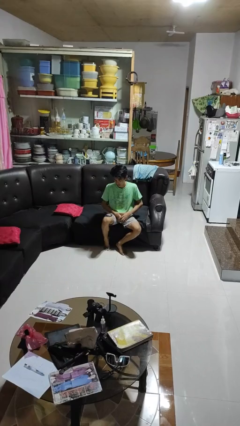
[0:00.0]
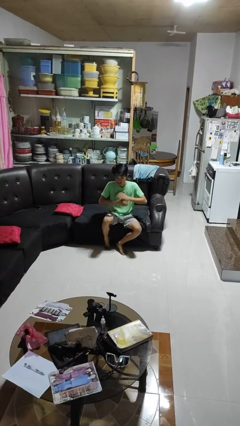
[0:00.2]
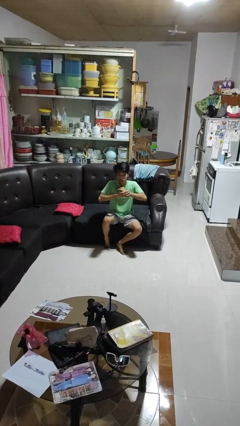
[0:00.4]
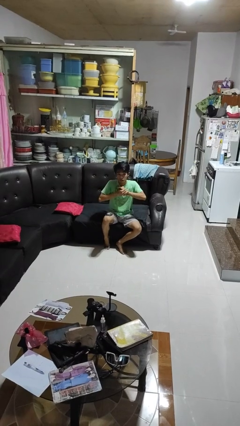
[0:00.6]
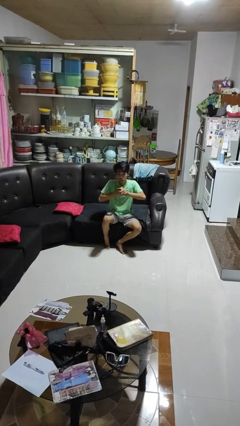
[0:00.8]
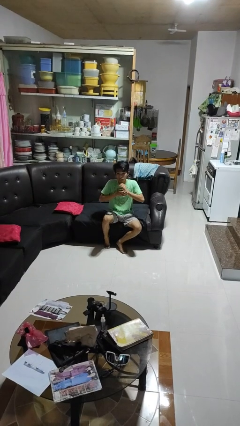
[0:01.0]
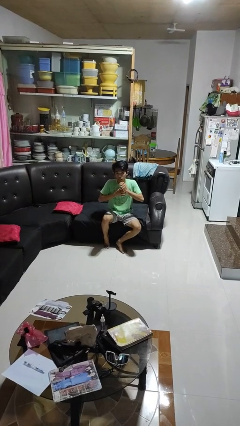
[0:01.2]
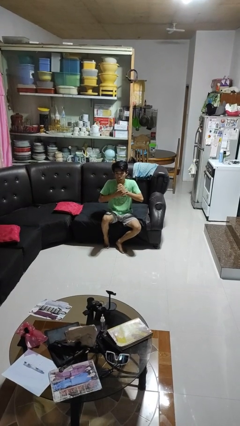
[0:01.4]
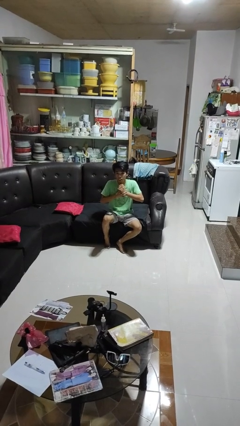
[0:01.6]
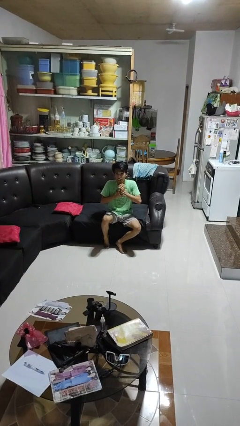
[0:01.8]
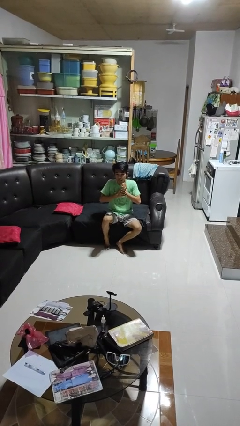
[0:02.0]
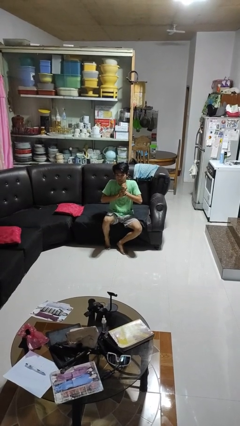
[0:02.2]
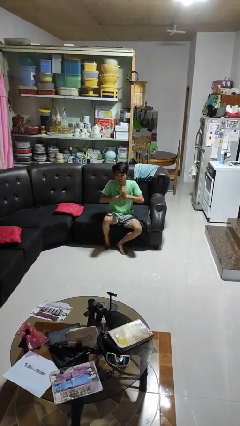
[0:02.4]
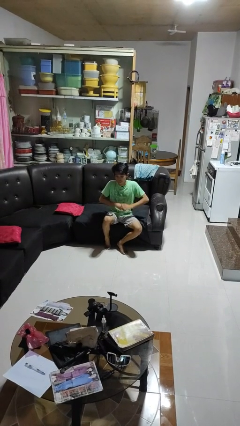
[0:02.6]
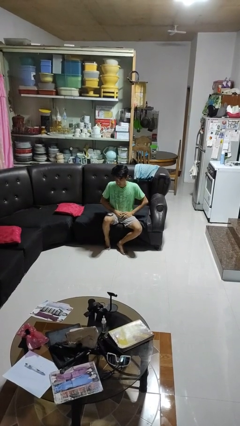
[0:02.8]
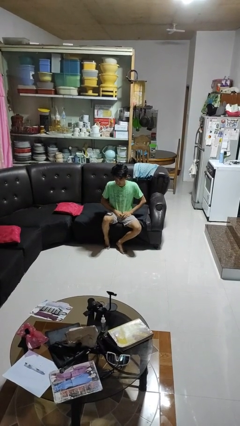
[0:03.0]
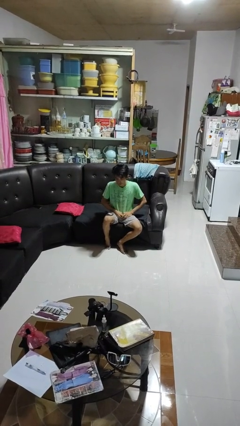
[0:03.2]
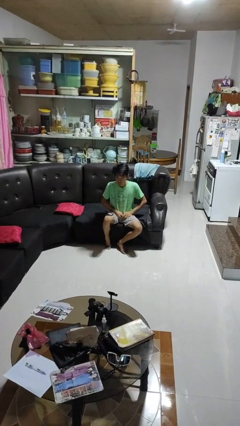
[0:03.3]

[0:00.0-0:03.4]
person cracks knuckles

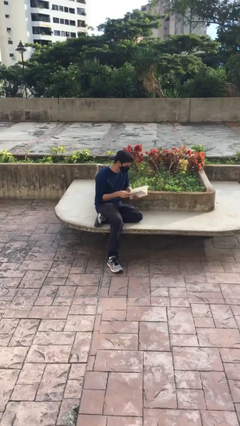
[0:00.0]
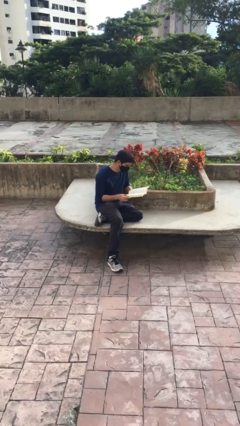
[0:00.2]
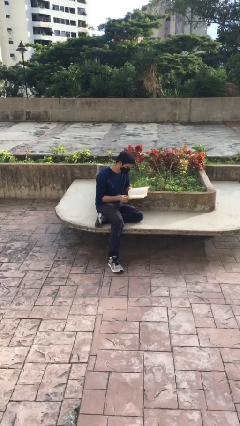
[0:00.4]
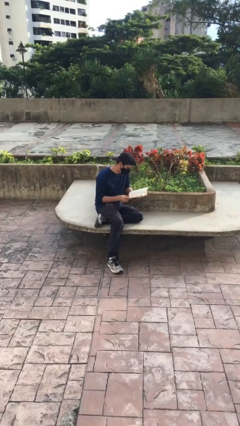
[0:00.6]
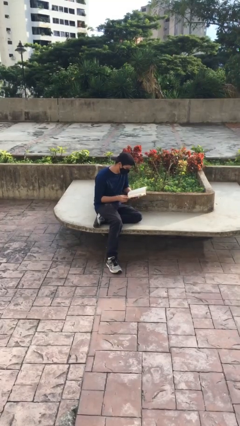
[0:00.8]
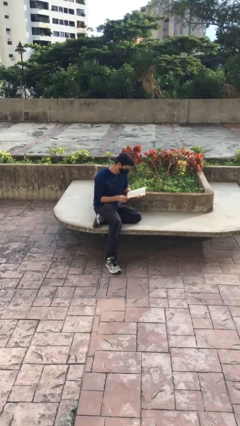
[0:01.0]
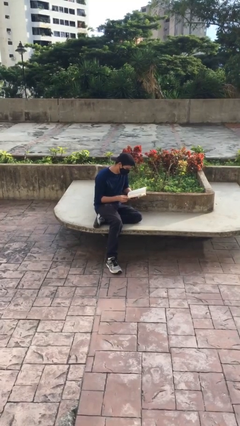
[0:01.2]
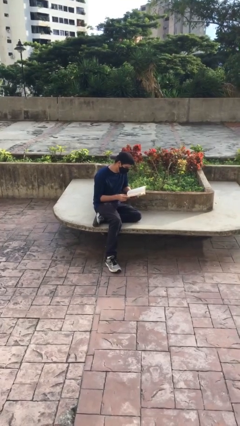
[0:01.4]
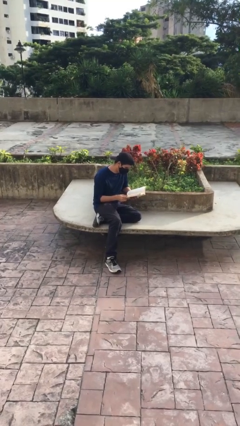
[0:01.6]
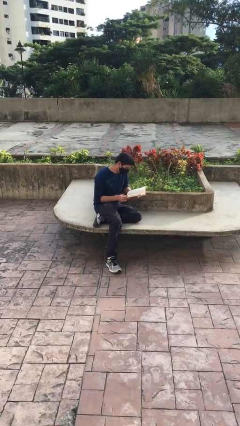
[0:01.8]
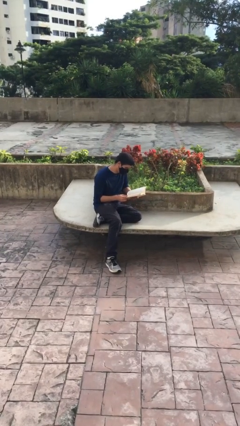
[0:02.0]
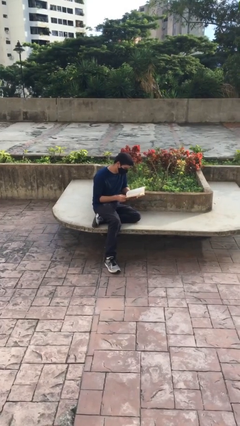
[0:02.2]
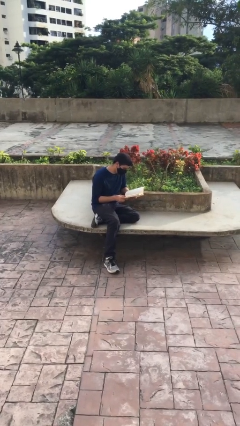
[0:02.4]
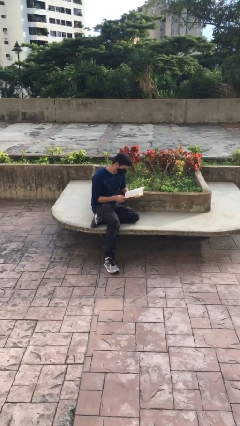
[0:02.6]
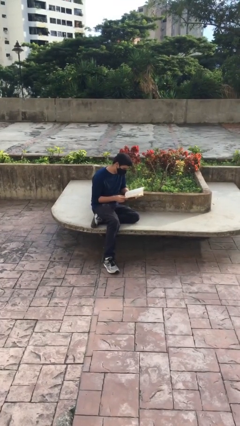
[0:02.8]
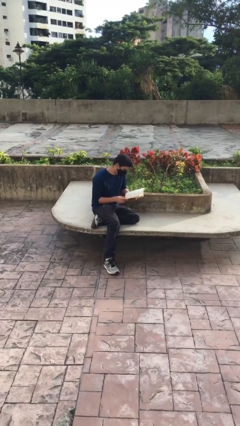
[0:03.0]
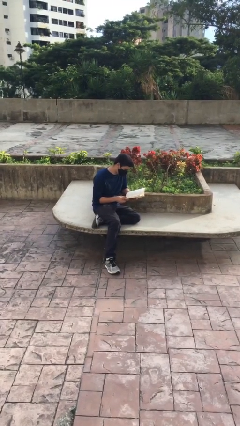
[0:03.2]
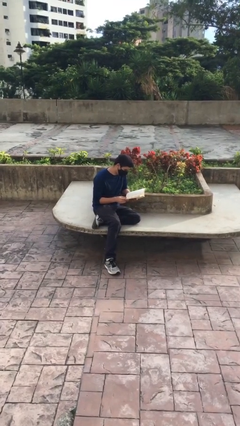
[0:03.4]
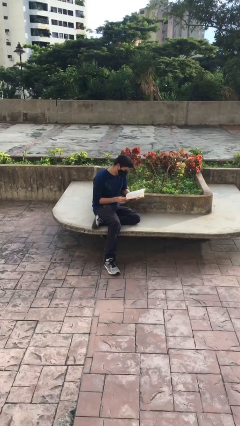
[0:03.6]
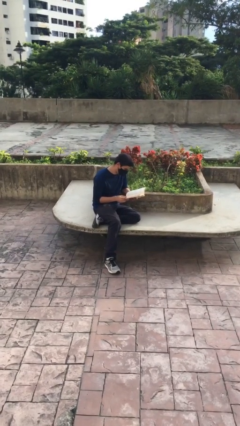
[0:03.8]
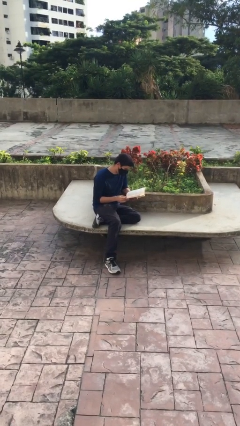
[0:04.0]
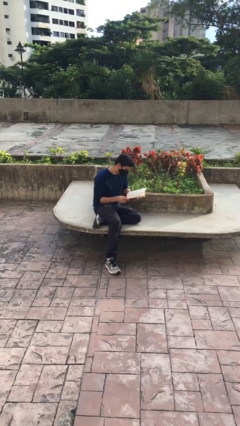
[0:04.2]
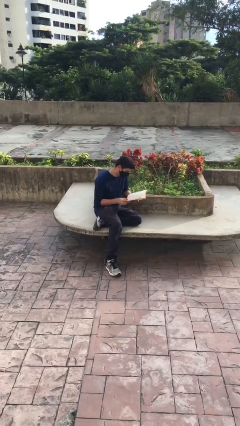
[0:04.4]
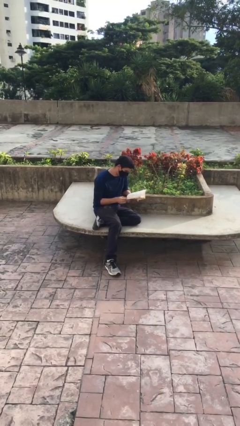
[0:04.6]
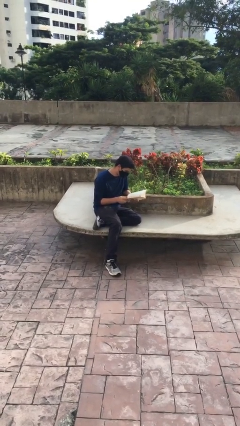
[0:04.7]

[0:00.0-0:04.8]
person reads document

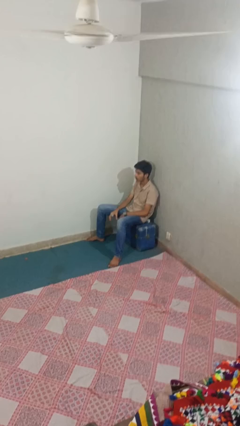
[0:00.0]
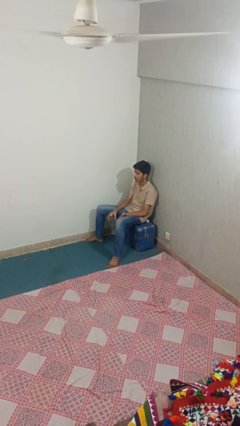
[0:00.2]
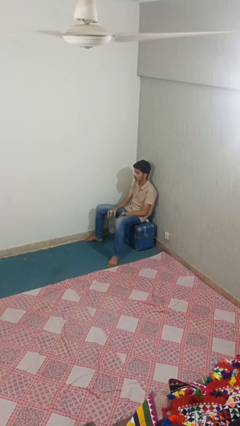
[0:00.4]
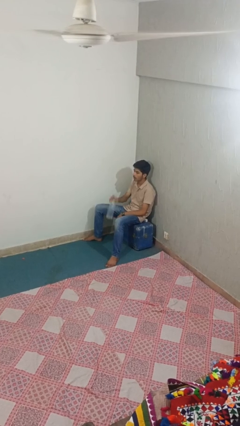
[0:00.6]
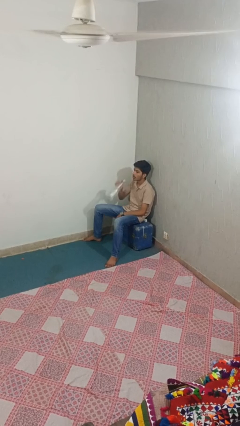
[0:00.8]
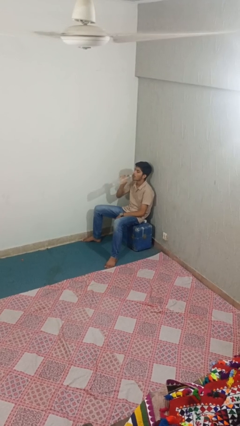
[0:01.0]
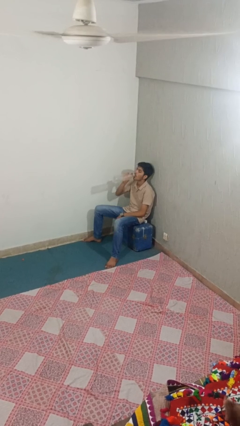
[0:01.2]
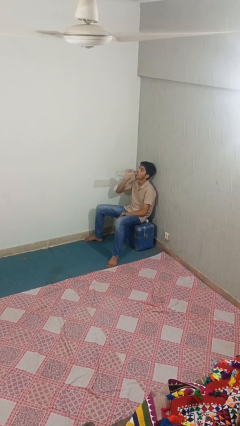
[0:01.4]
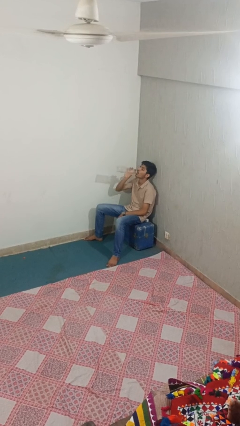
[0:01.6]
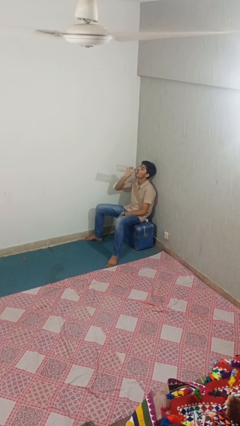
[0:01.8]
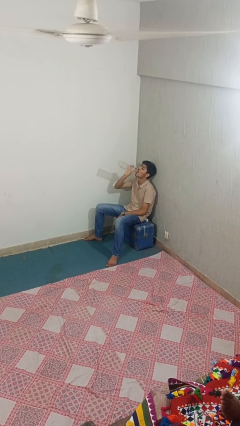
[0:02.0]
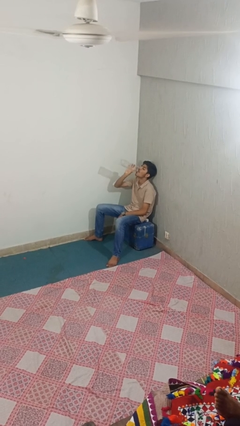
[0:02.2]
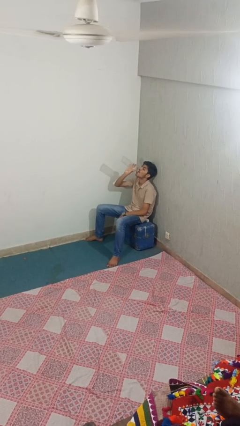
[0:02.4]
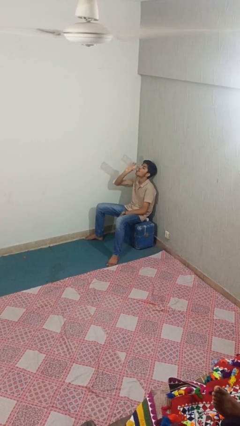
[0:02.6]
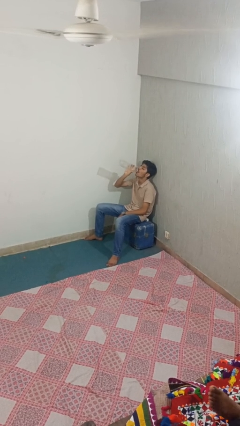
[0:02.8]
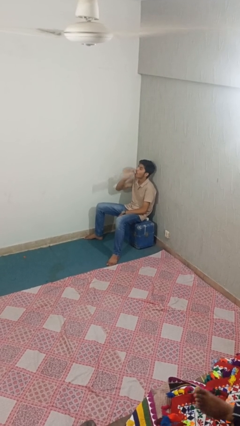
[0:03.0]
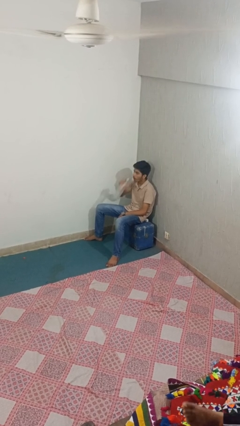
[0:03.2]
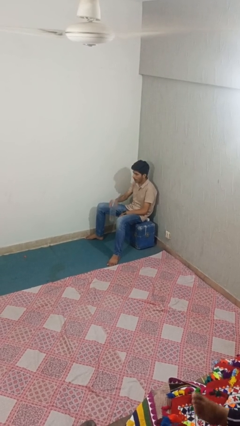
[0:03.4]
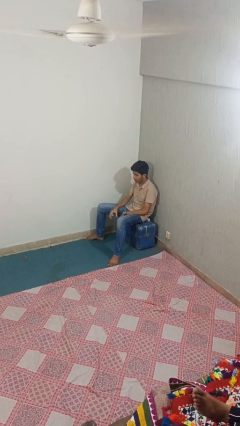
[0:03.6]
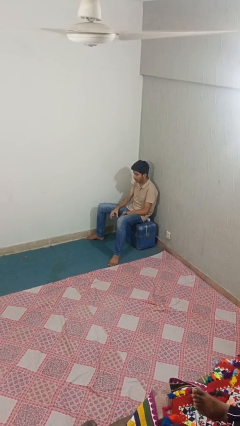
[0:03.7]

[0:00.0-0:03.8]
person drinks from bottle

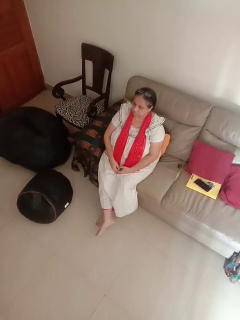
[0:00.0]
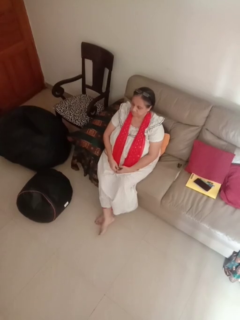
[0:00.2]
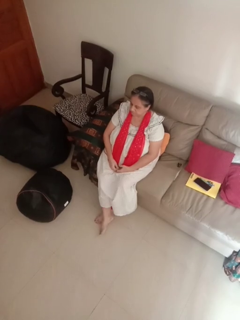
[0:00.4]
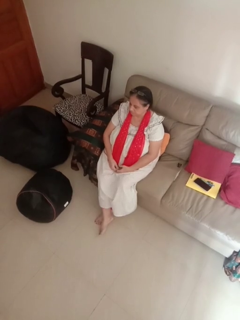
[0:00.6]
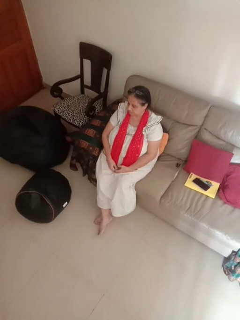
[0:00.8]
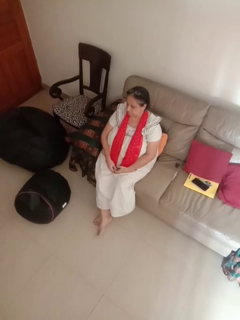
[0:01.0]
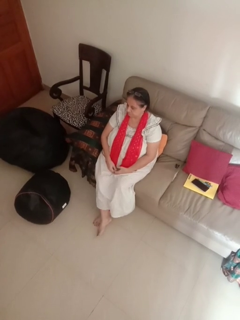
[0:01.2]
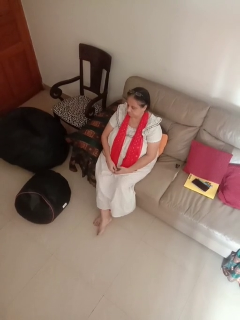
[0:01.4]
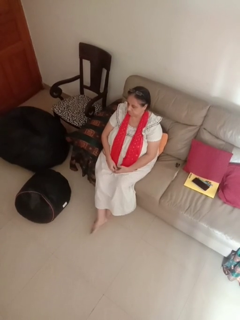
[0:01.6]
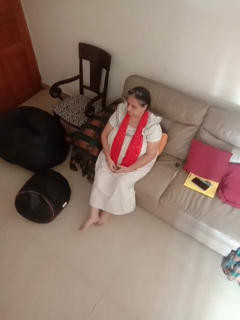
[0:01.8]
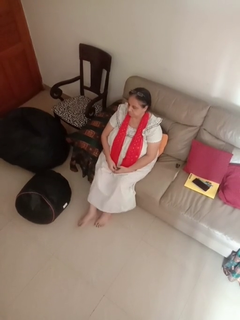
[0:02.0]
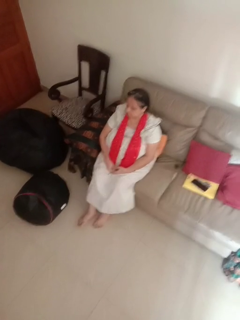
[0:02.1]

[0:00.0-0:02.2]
person crosses legs

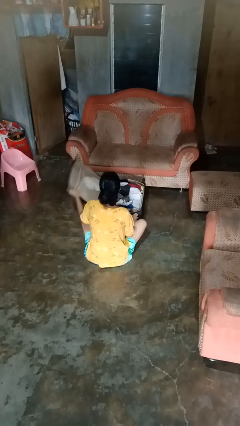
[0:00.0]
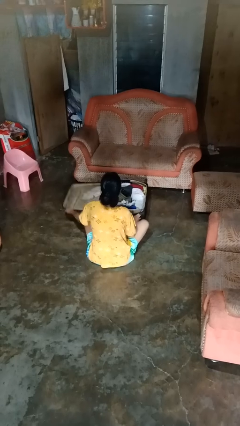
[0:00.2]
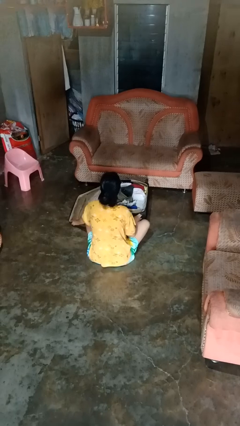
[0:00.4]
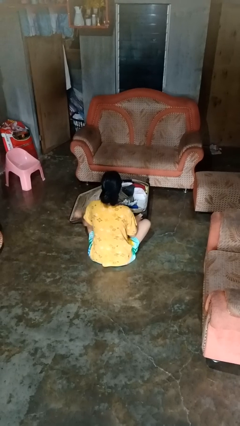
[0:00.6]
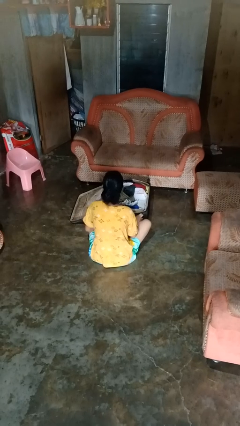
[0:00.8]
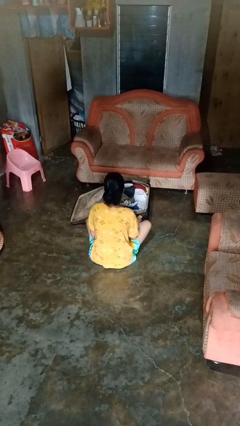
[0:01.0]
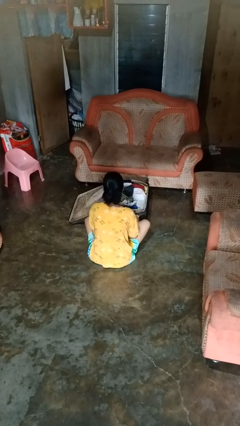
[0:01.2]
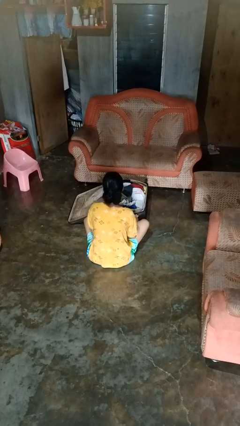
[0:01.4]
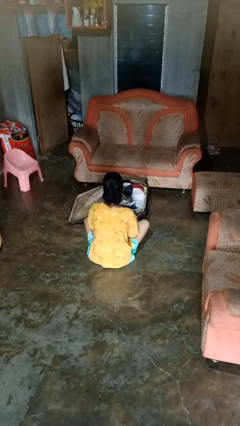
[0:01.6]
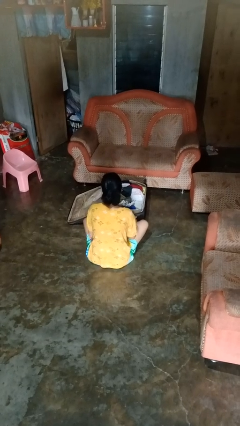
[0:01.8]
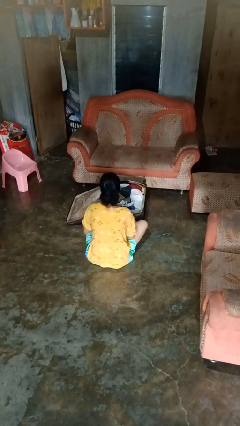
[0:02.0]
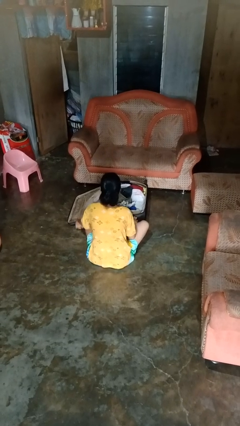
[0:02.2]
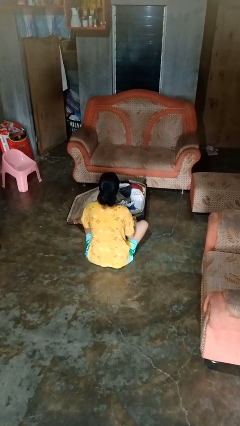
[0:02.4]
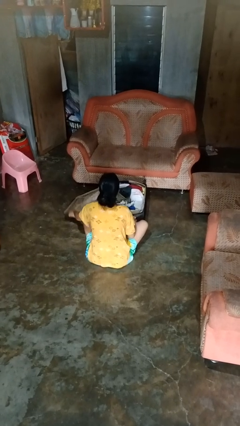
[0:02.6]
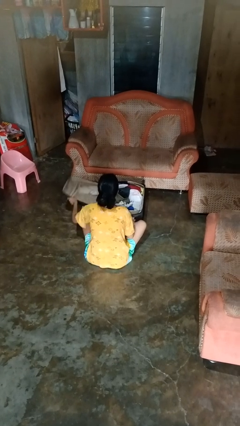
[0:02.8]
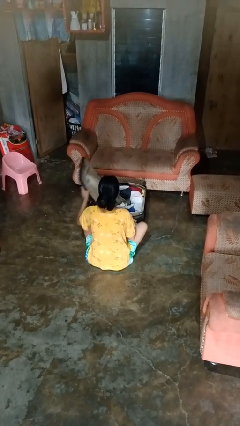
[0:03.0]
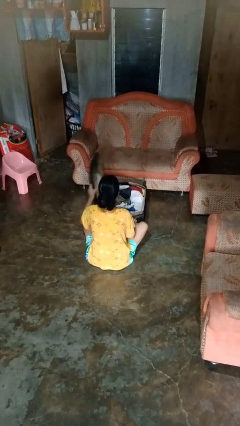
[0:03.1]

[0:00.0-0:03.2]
person opens suitcase

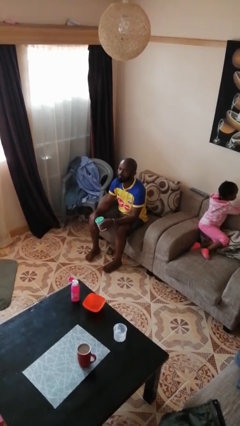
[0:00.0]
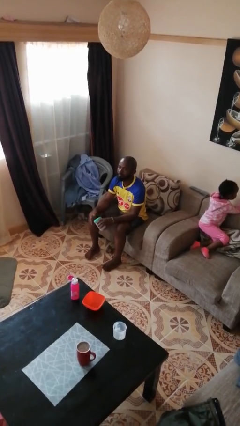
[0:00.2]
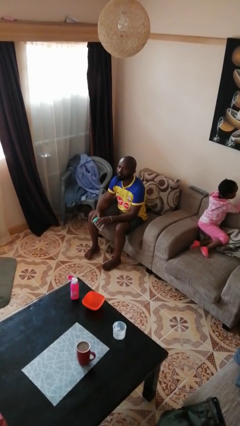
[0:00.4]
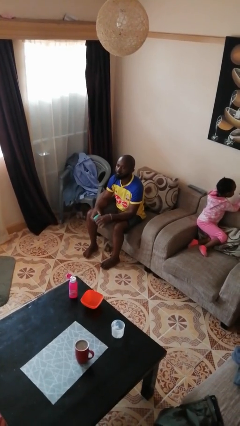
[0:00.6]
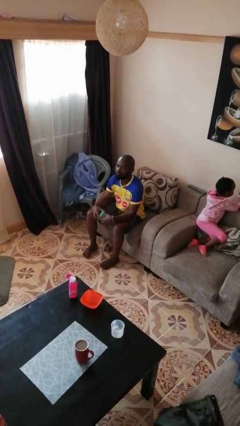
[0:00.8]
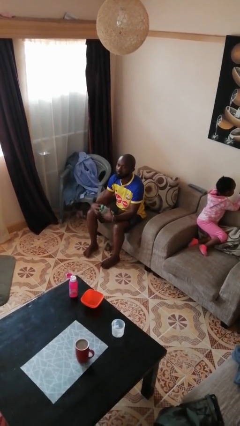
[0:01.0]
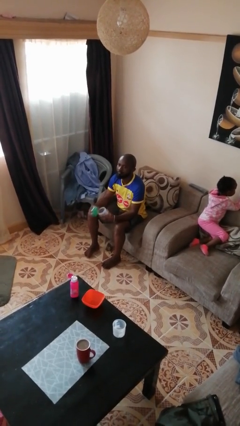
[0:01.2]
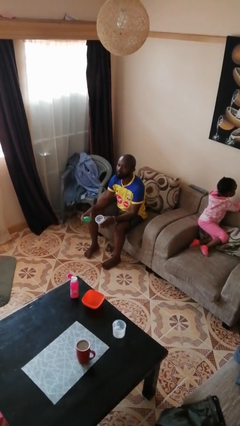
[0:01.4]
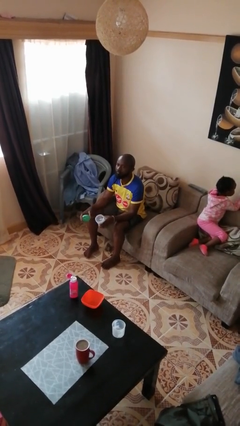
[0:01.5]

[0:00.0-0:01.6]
person opens jar
